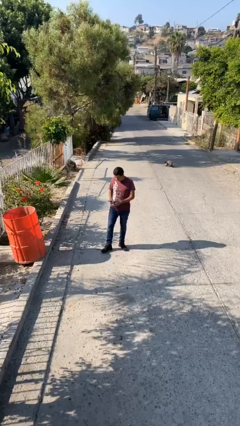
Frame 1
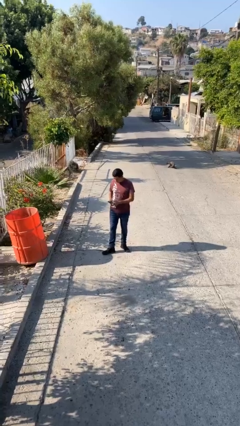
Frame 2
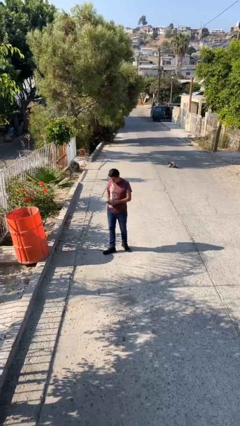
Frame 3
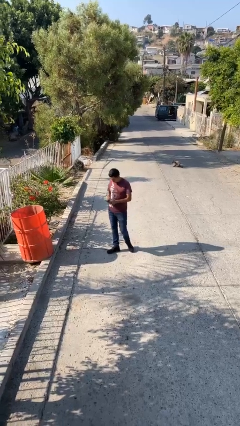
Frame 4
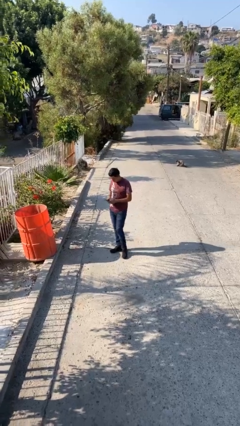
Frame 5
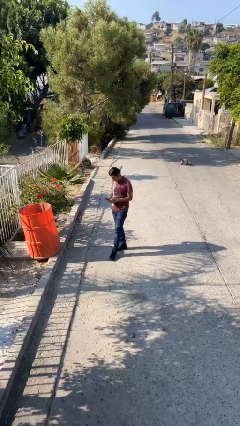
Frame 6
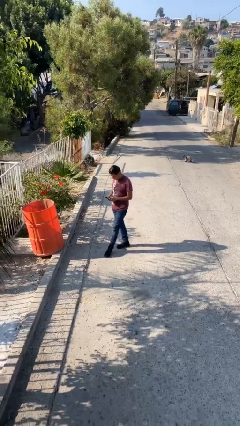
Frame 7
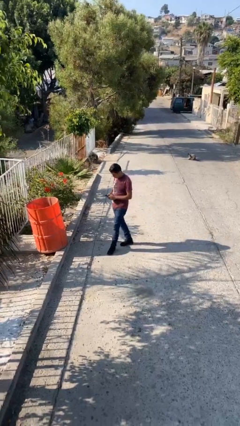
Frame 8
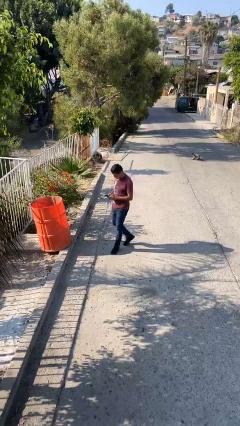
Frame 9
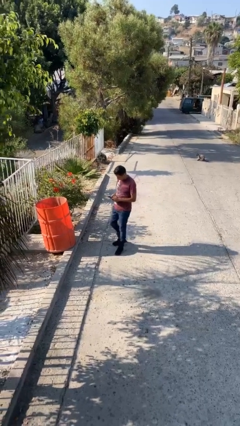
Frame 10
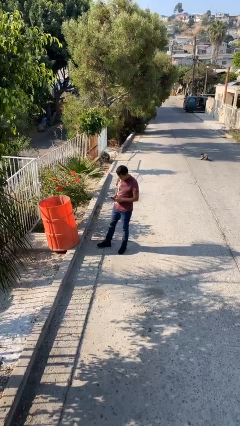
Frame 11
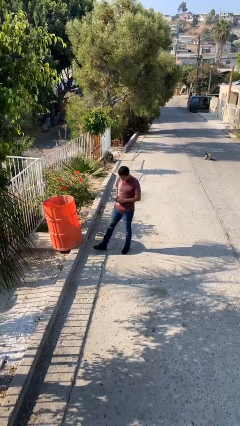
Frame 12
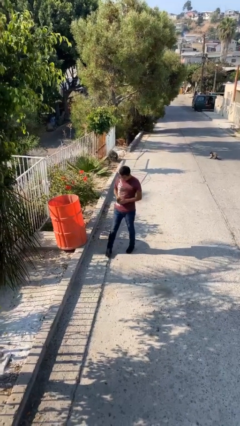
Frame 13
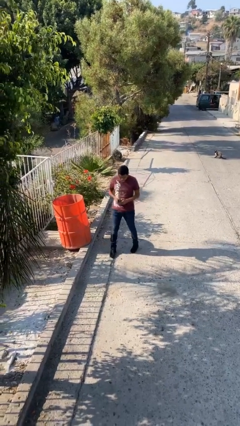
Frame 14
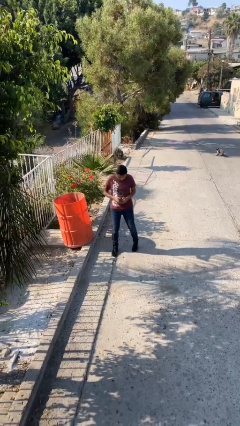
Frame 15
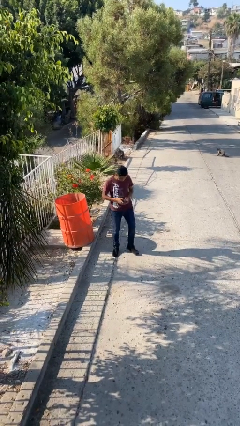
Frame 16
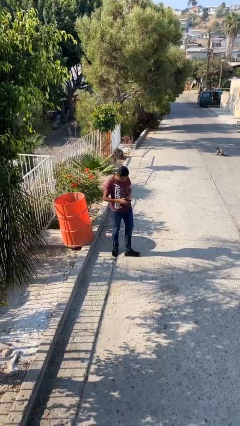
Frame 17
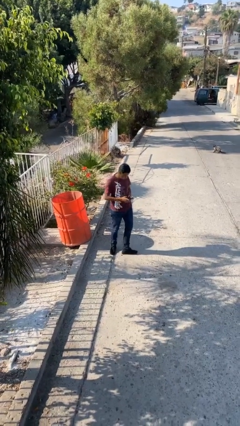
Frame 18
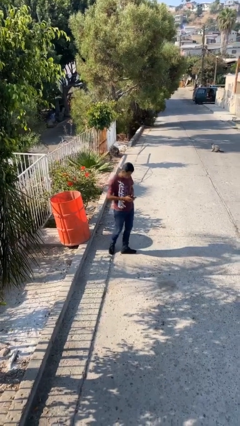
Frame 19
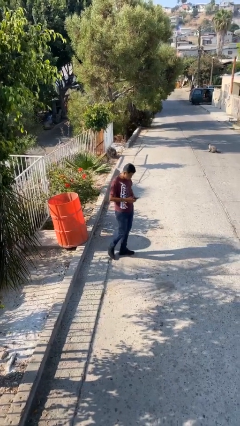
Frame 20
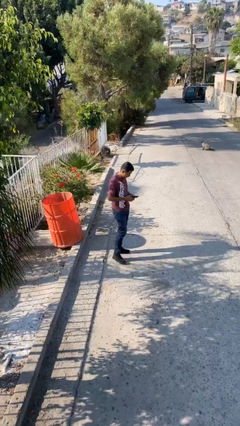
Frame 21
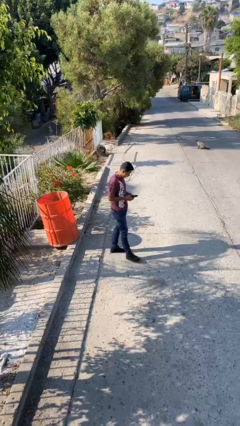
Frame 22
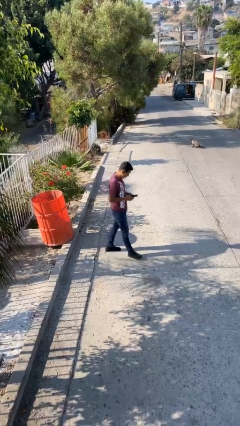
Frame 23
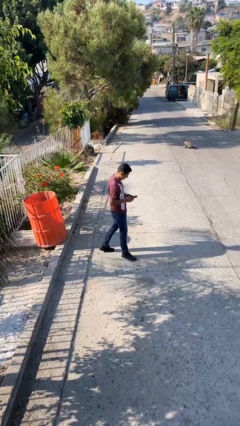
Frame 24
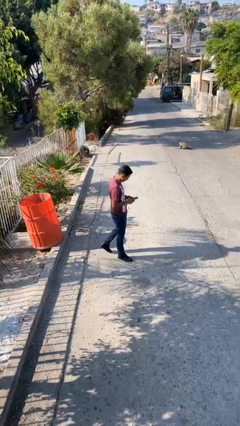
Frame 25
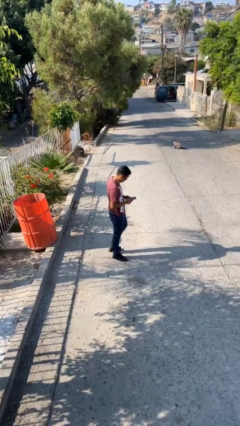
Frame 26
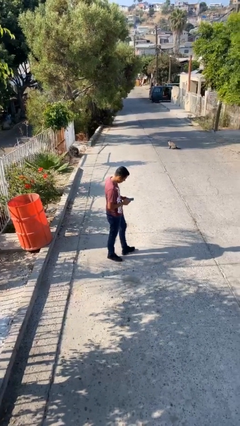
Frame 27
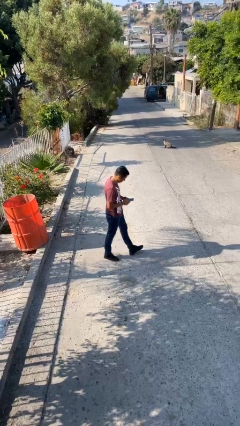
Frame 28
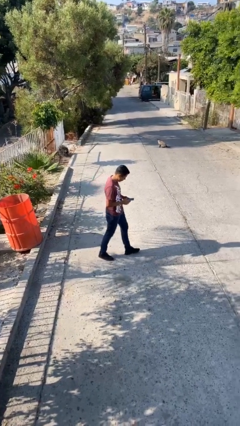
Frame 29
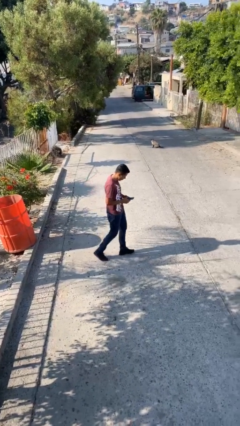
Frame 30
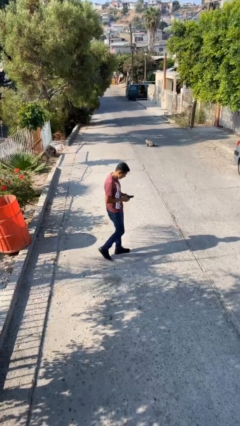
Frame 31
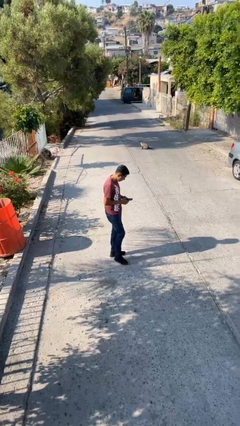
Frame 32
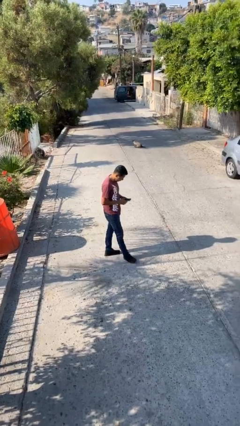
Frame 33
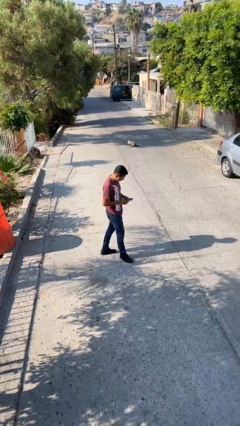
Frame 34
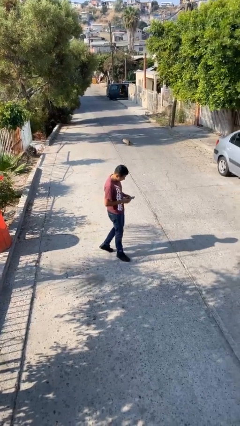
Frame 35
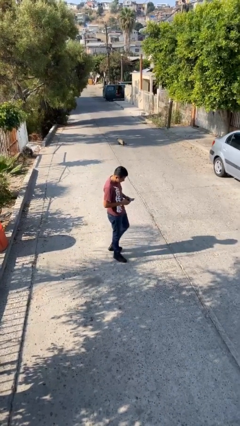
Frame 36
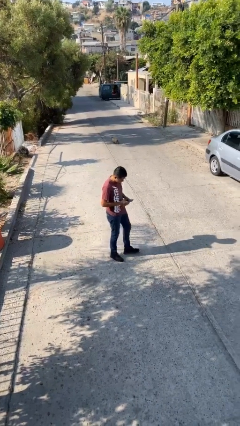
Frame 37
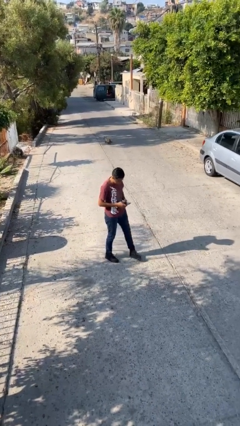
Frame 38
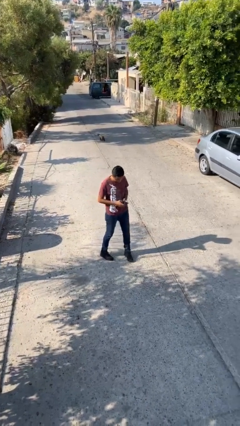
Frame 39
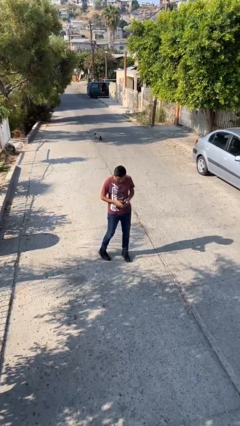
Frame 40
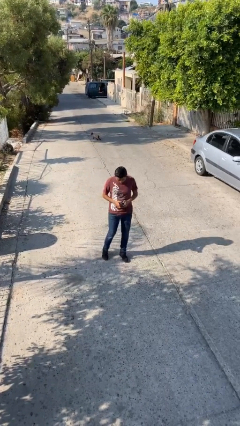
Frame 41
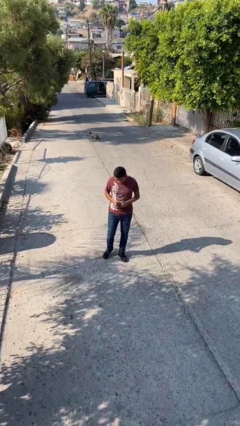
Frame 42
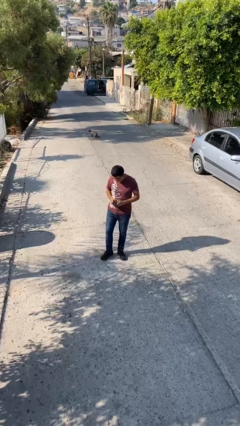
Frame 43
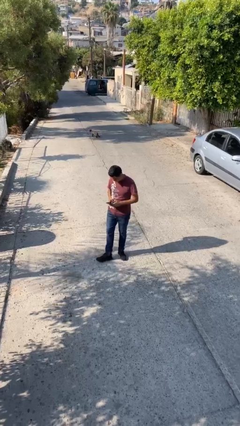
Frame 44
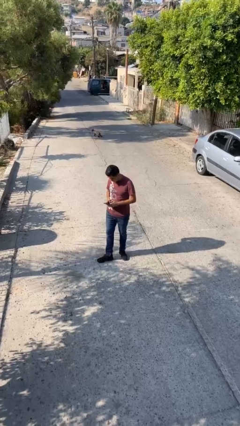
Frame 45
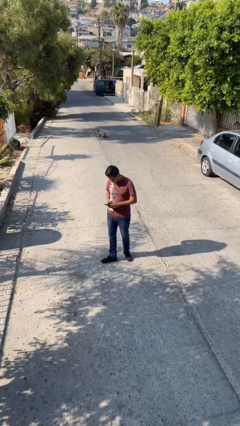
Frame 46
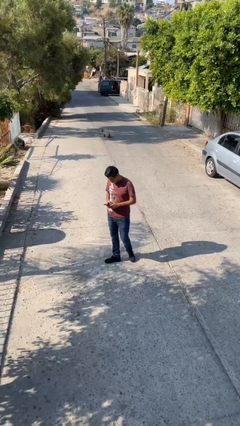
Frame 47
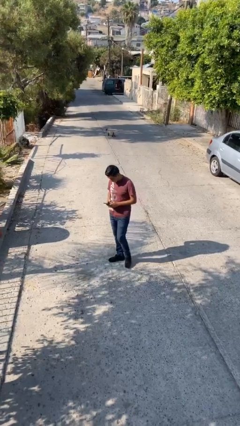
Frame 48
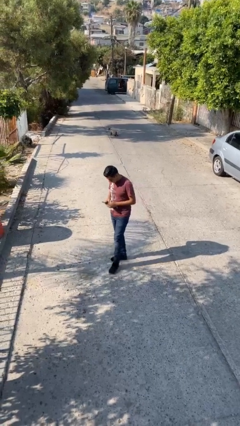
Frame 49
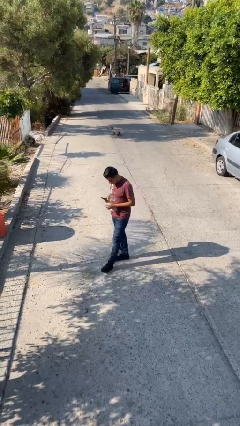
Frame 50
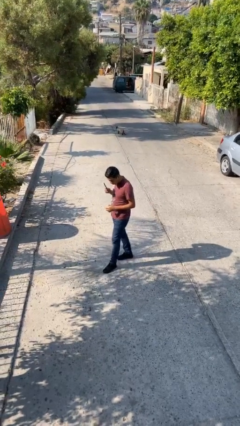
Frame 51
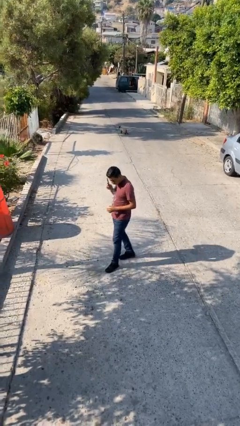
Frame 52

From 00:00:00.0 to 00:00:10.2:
person texts on phone

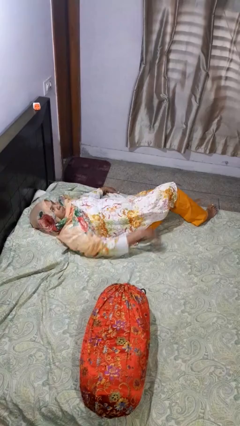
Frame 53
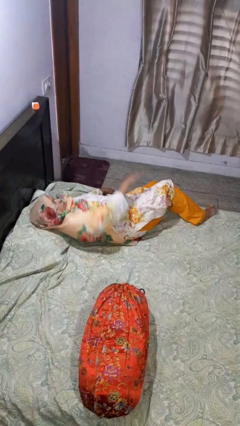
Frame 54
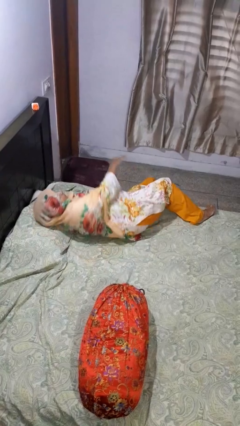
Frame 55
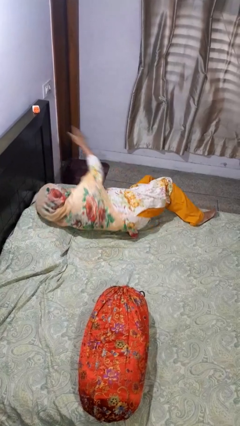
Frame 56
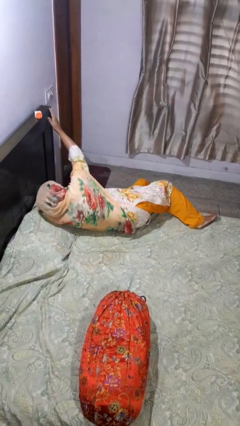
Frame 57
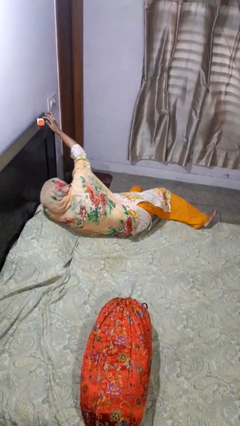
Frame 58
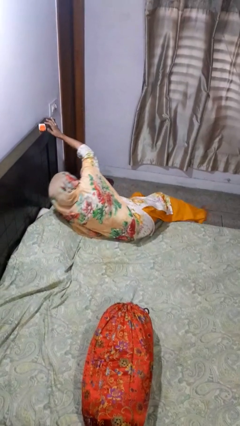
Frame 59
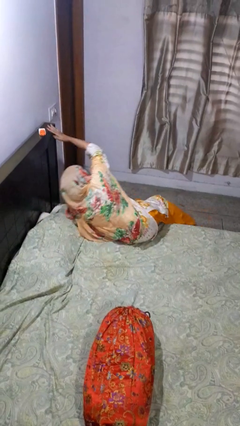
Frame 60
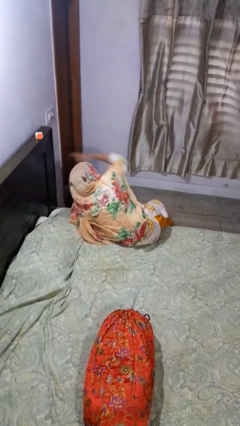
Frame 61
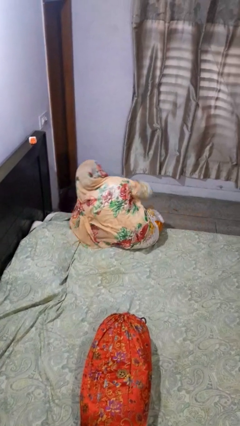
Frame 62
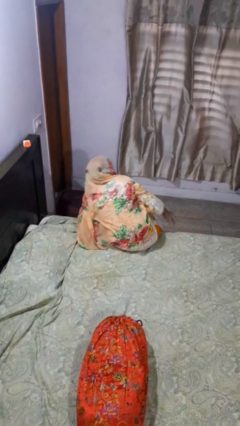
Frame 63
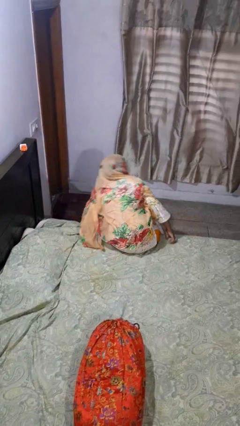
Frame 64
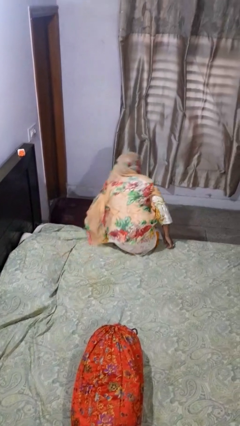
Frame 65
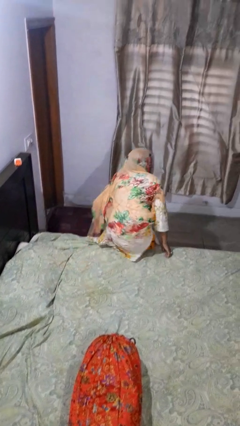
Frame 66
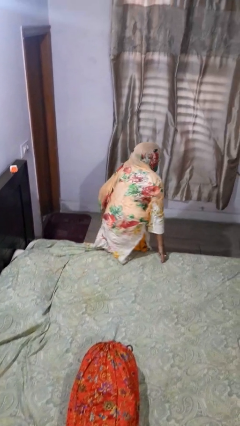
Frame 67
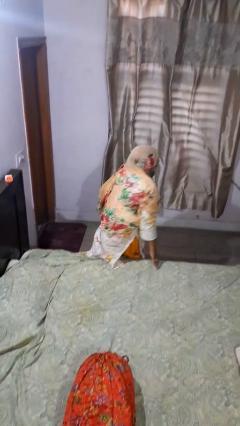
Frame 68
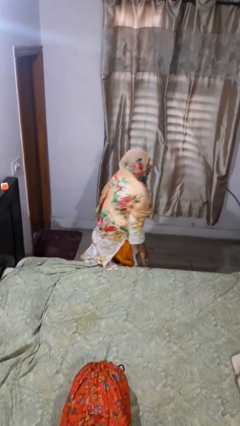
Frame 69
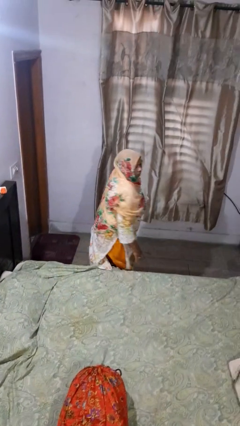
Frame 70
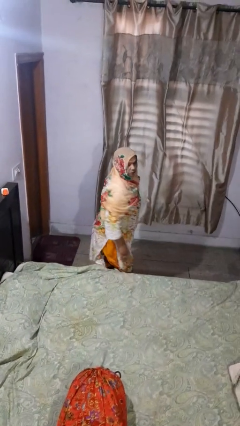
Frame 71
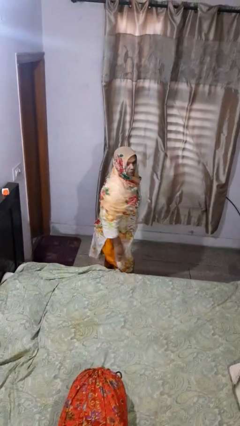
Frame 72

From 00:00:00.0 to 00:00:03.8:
person stands up

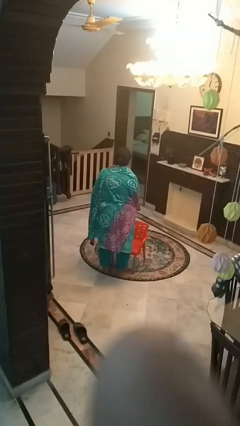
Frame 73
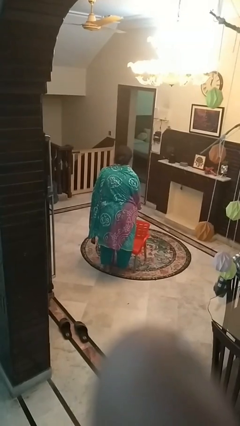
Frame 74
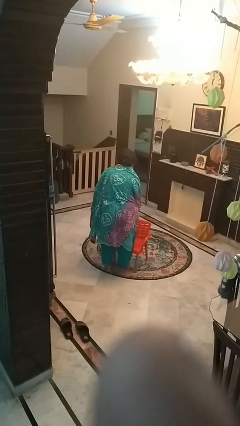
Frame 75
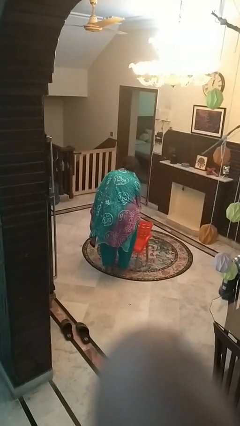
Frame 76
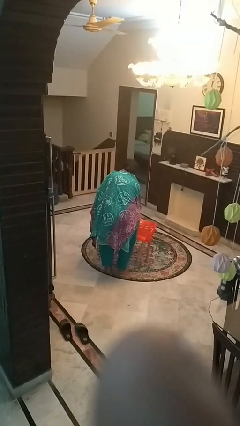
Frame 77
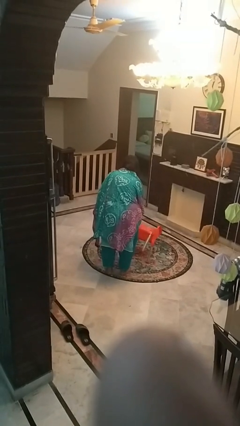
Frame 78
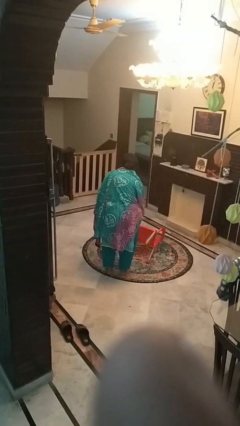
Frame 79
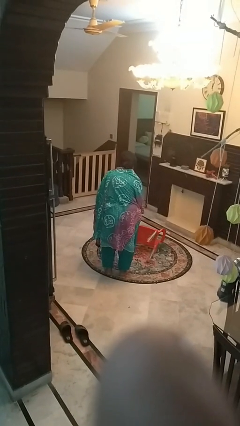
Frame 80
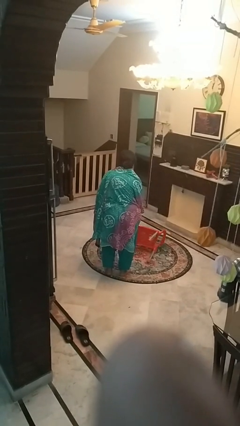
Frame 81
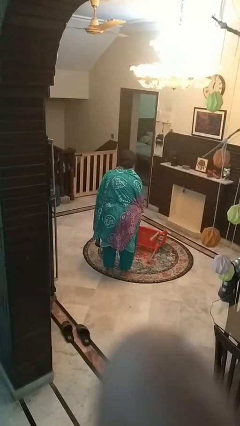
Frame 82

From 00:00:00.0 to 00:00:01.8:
person knocks over furniture

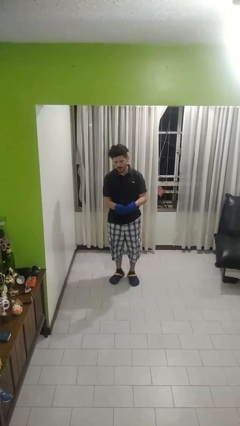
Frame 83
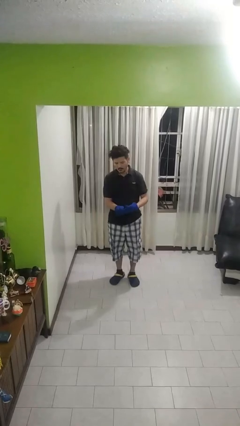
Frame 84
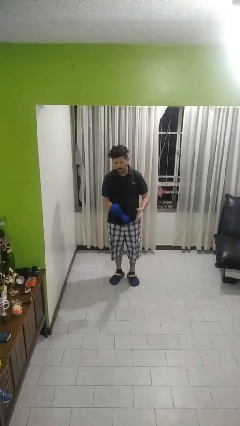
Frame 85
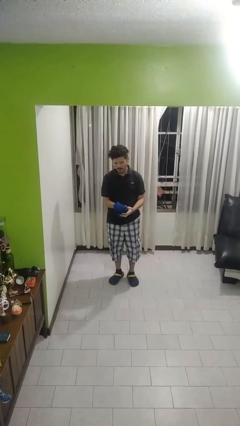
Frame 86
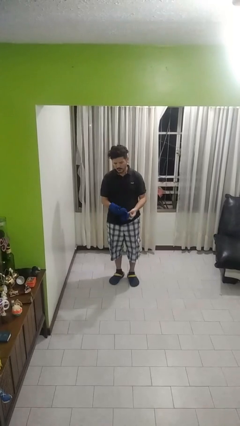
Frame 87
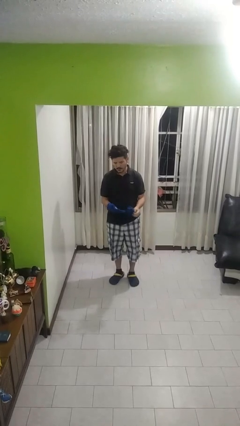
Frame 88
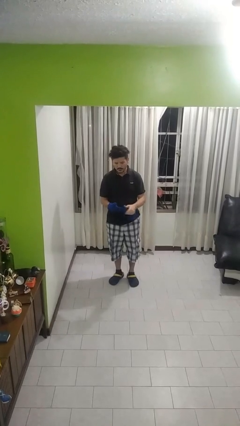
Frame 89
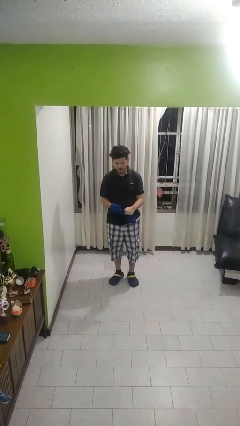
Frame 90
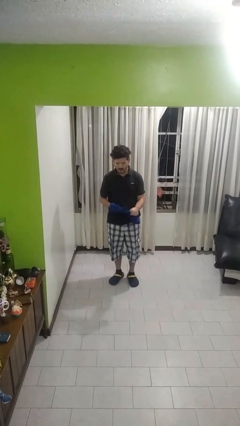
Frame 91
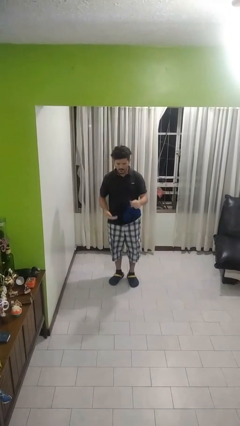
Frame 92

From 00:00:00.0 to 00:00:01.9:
person takes off gloves

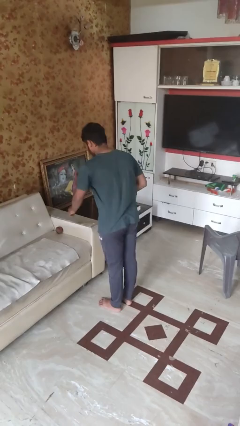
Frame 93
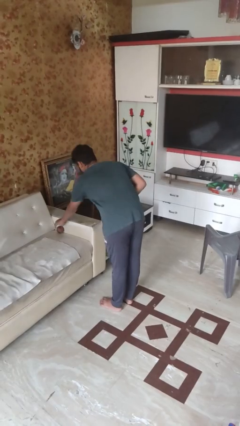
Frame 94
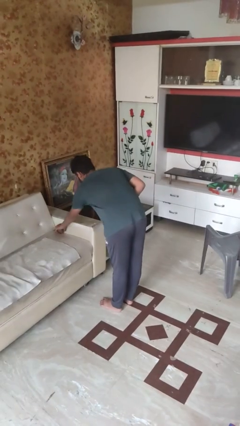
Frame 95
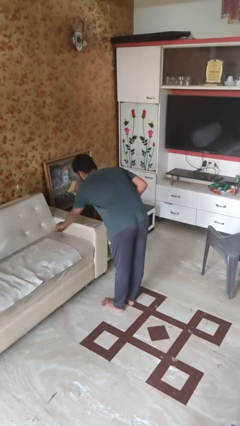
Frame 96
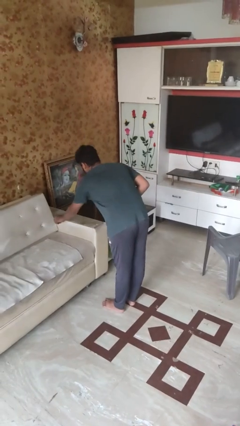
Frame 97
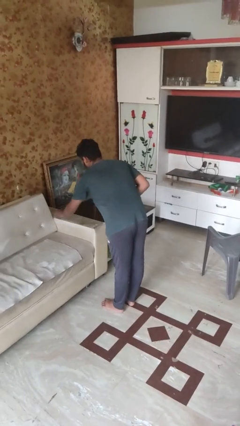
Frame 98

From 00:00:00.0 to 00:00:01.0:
person picks up object from bed
